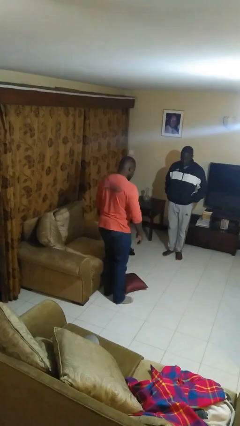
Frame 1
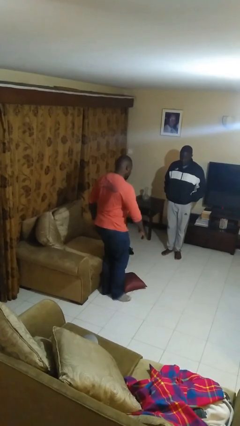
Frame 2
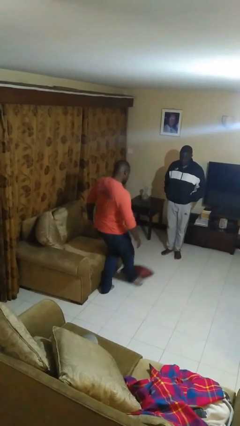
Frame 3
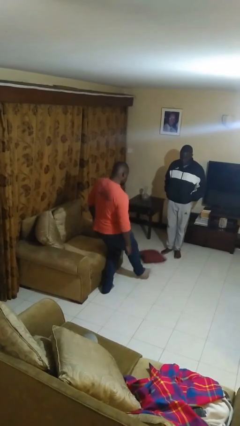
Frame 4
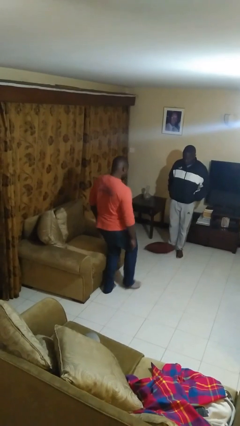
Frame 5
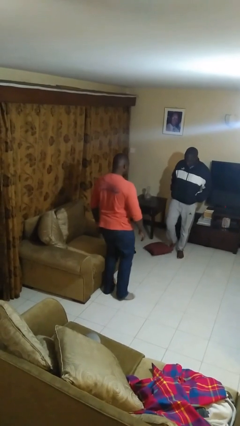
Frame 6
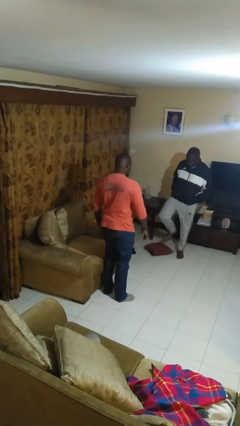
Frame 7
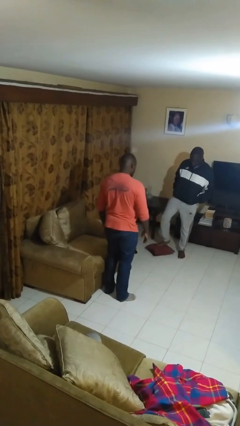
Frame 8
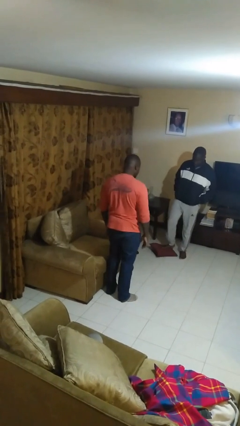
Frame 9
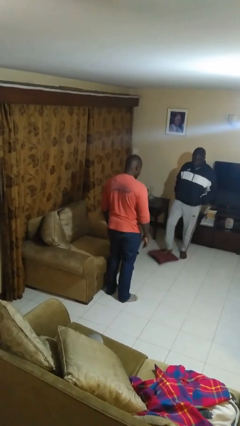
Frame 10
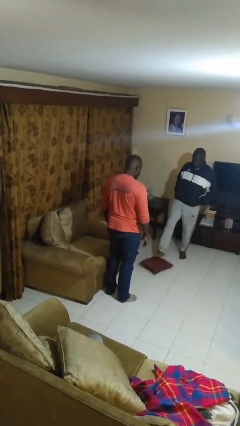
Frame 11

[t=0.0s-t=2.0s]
person kicks object to person

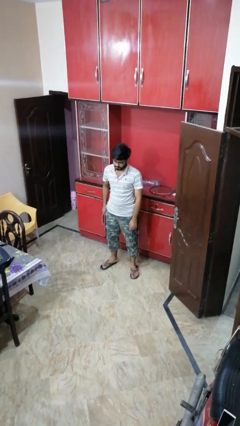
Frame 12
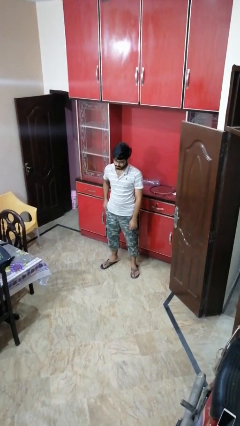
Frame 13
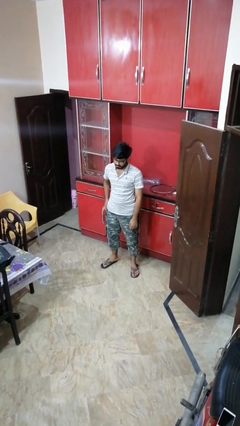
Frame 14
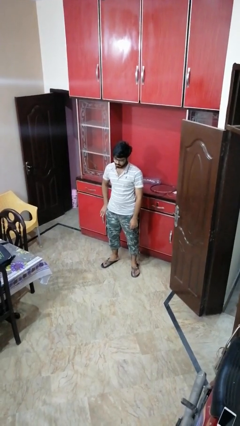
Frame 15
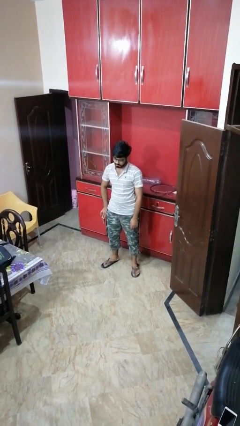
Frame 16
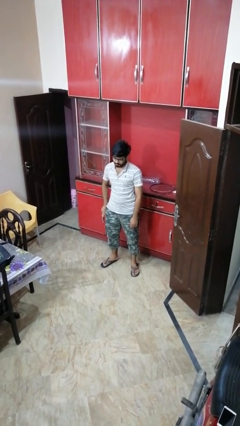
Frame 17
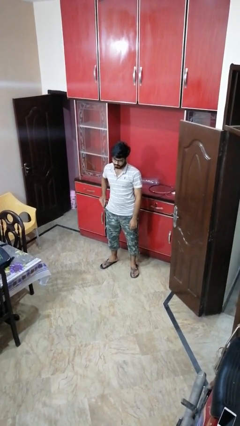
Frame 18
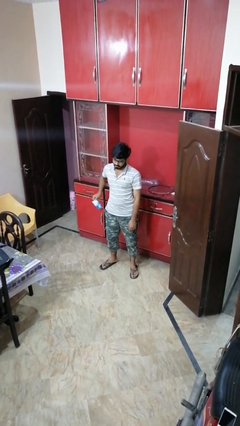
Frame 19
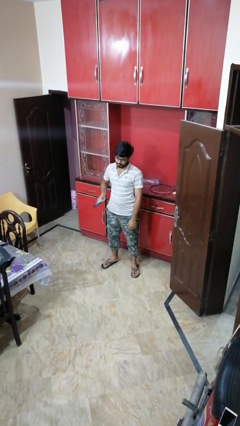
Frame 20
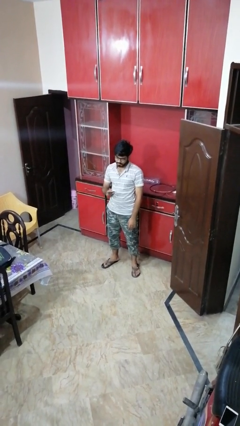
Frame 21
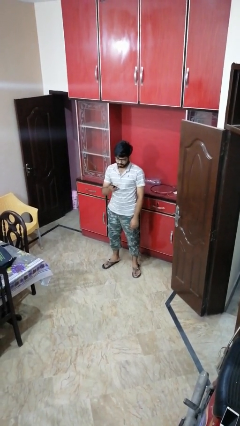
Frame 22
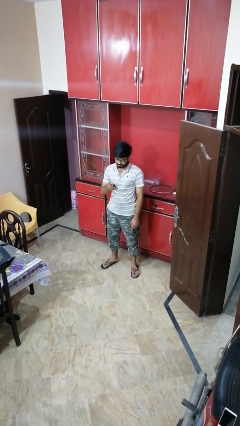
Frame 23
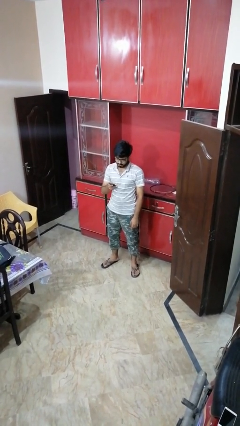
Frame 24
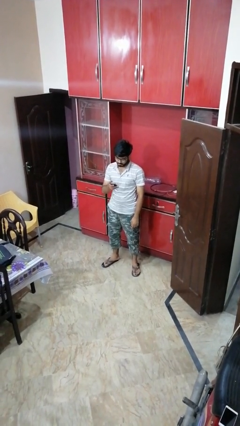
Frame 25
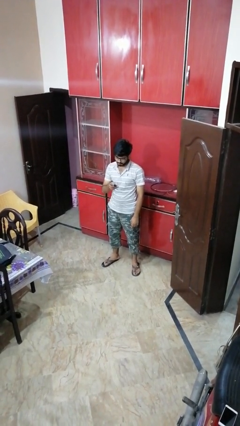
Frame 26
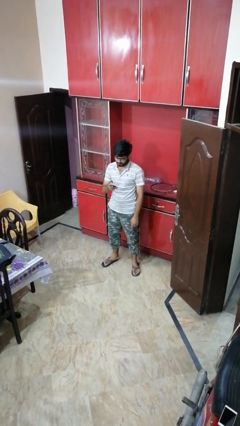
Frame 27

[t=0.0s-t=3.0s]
person takes phone from pocket

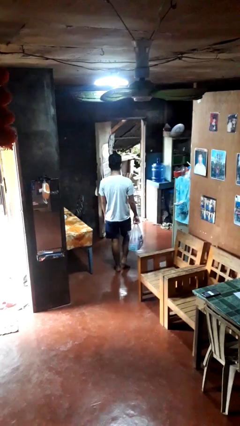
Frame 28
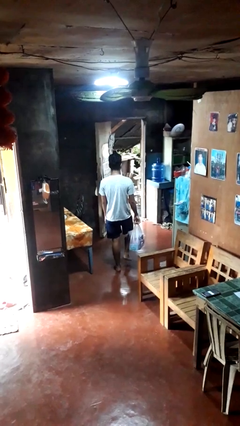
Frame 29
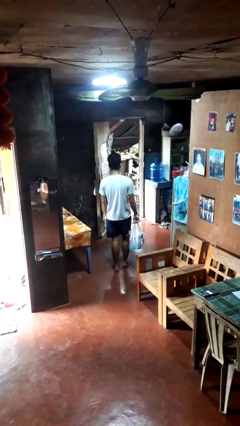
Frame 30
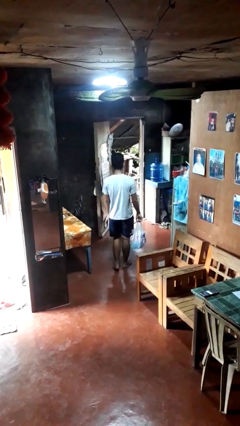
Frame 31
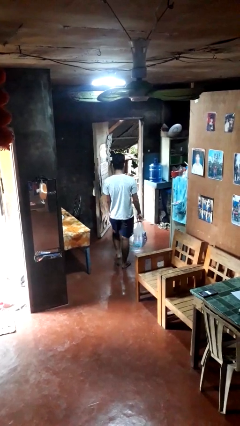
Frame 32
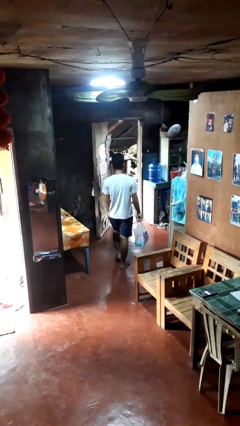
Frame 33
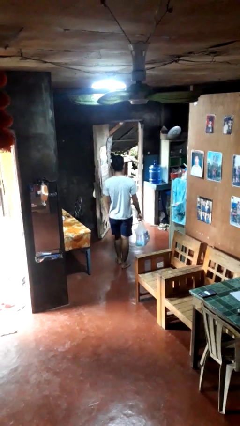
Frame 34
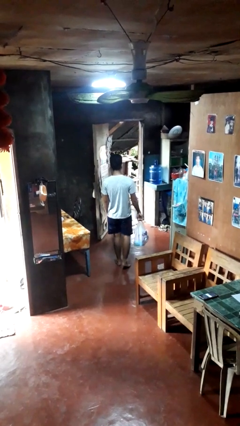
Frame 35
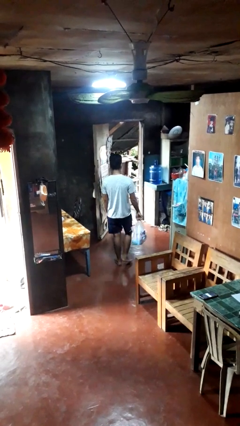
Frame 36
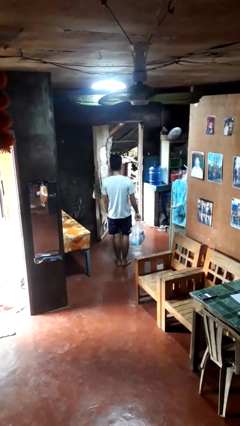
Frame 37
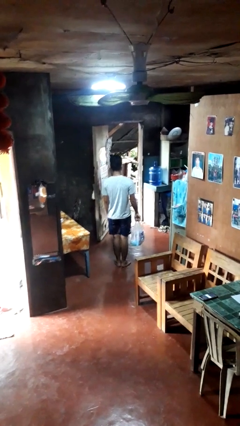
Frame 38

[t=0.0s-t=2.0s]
person carries groceries

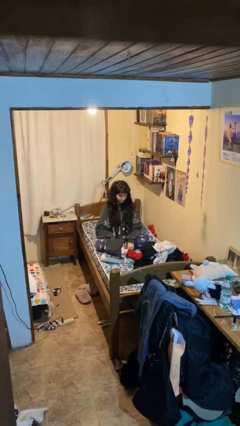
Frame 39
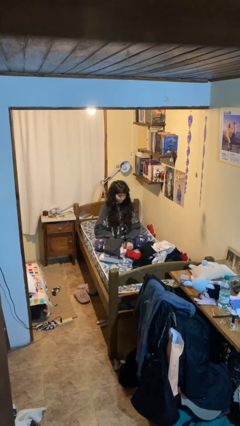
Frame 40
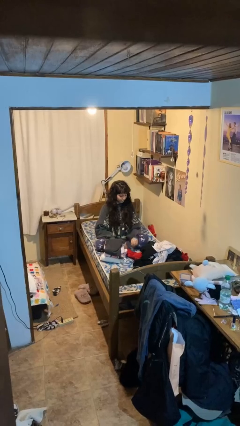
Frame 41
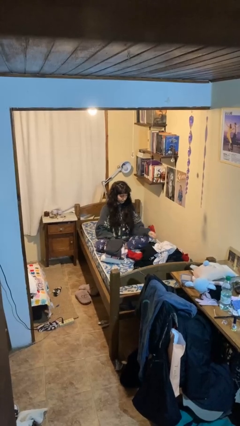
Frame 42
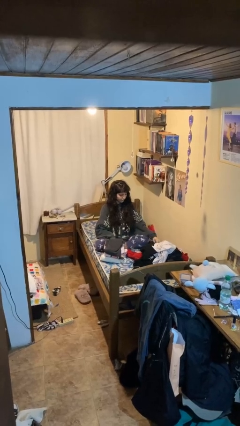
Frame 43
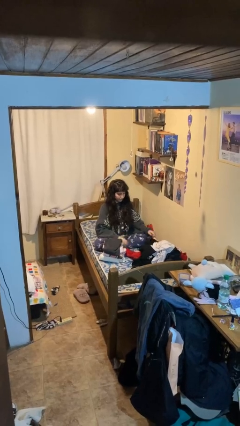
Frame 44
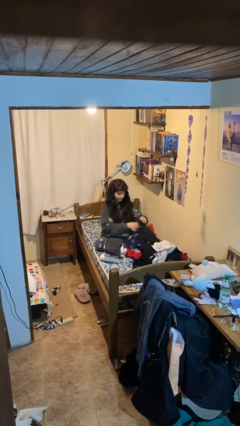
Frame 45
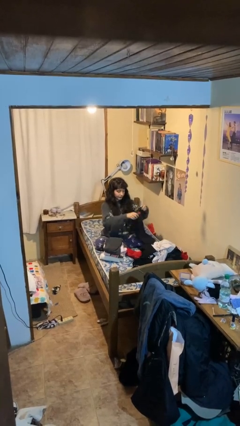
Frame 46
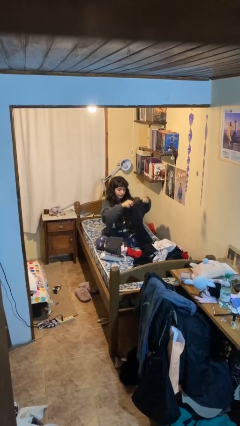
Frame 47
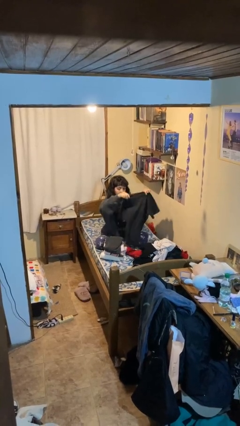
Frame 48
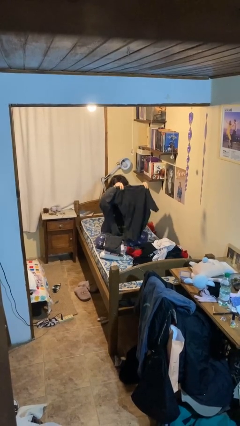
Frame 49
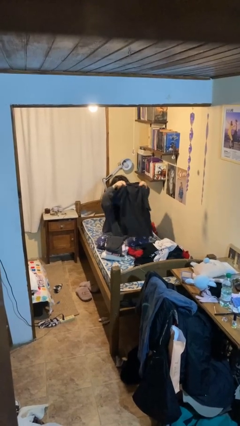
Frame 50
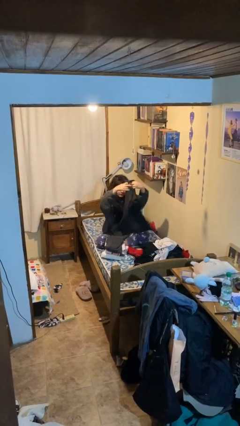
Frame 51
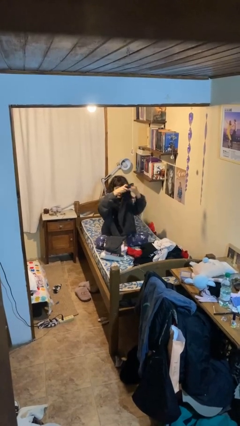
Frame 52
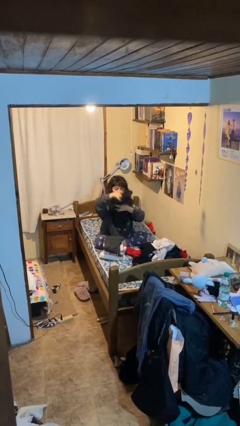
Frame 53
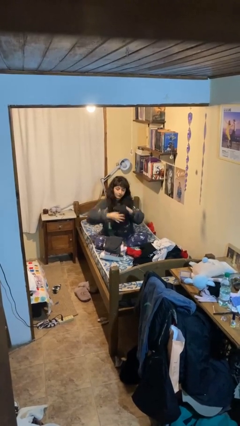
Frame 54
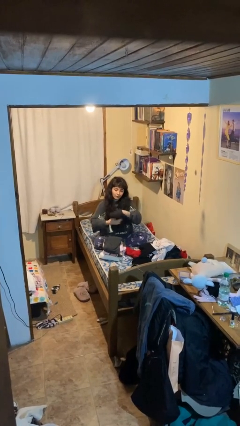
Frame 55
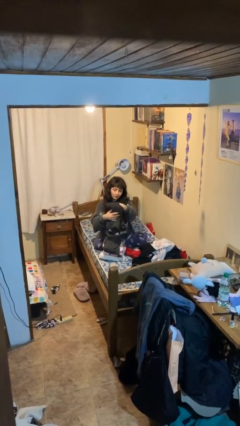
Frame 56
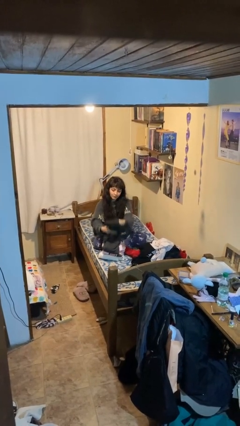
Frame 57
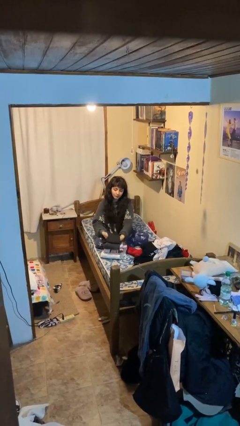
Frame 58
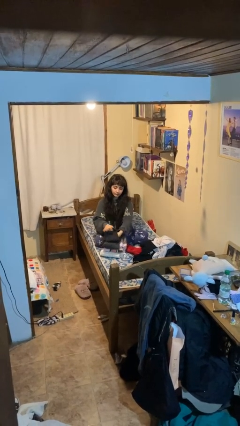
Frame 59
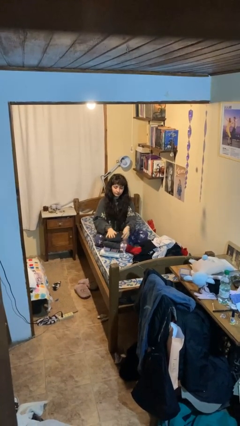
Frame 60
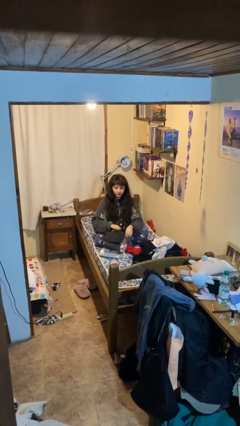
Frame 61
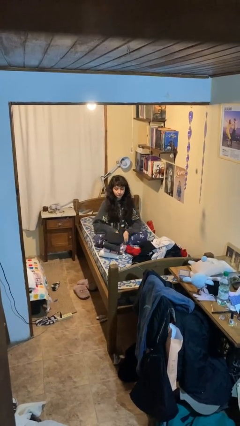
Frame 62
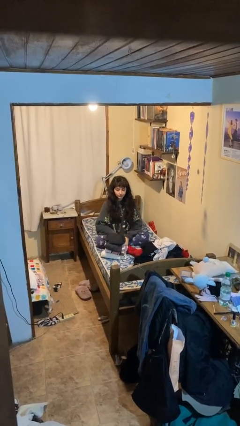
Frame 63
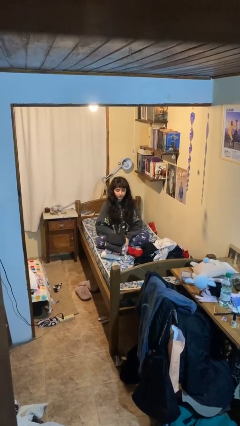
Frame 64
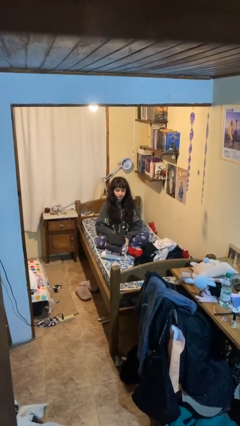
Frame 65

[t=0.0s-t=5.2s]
person folds shirt

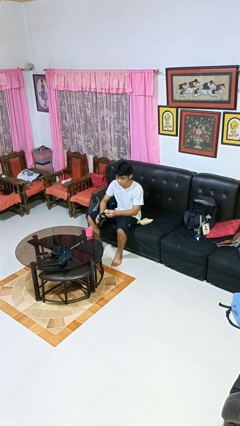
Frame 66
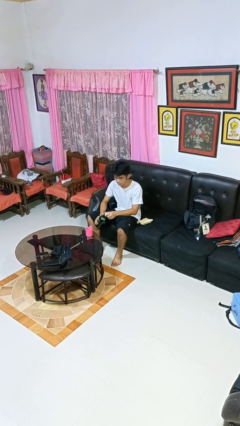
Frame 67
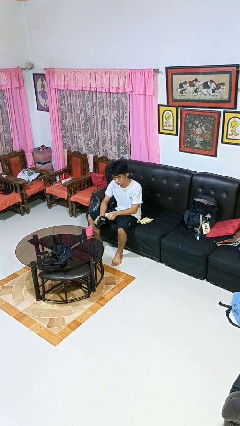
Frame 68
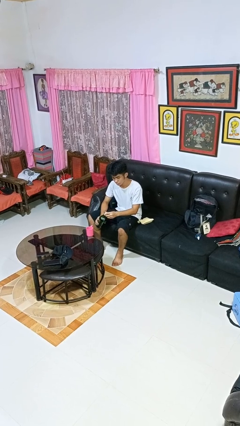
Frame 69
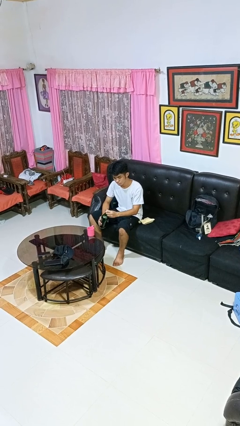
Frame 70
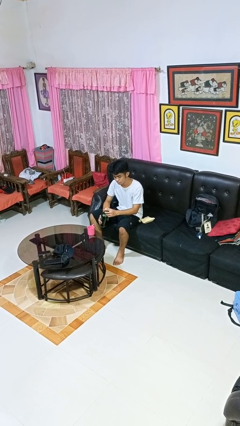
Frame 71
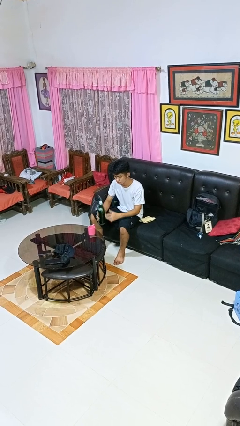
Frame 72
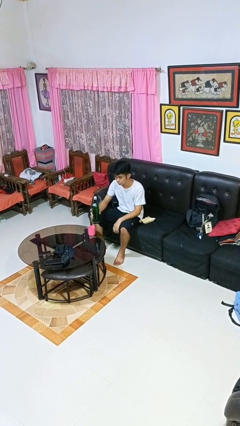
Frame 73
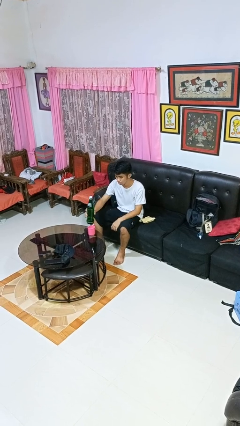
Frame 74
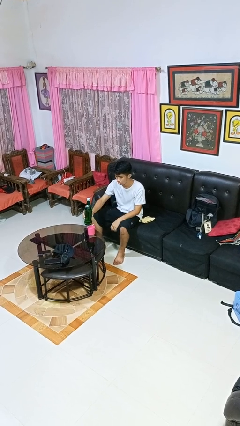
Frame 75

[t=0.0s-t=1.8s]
person screws lid to bottle

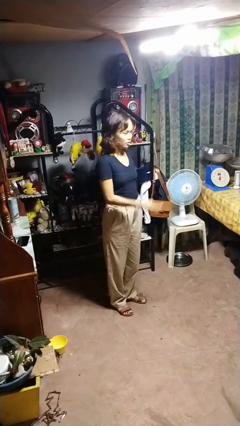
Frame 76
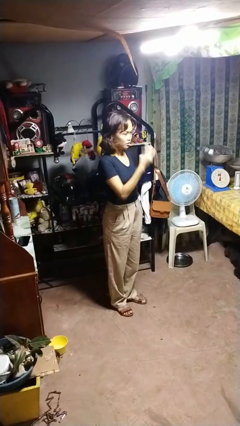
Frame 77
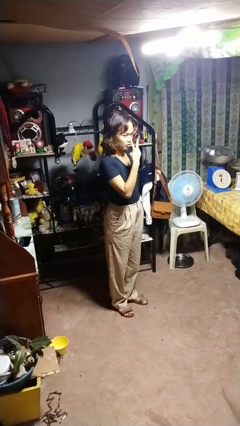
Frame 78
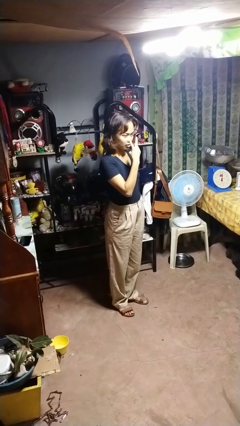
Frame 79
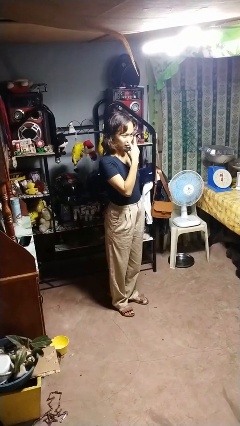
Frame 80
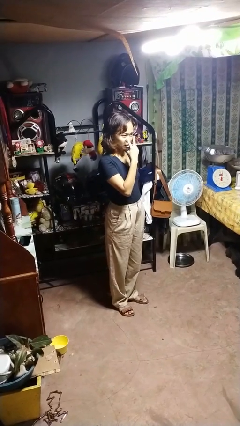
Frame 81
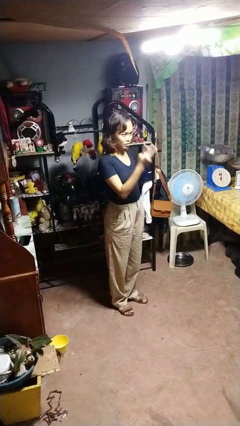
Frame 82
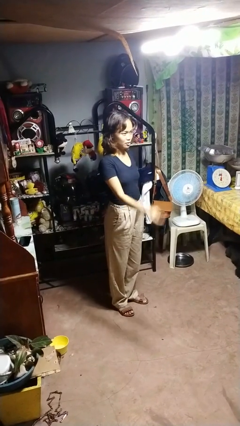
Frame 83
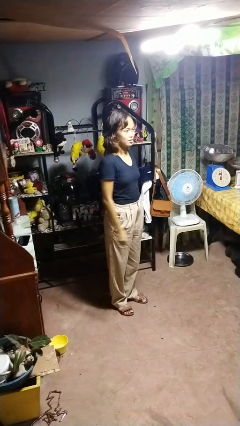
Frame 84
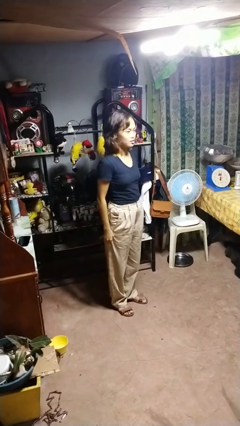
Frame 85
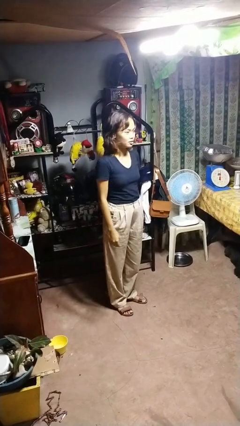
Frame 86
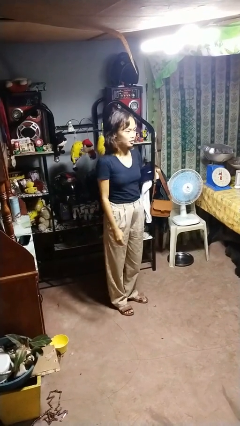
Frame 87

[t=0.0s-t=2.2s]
person gestures watch closely

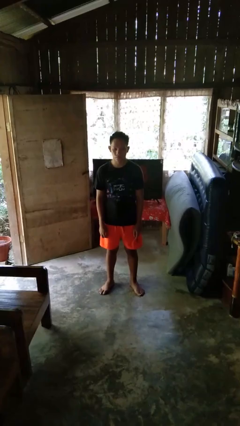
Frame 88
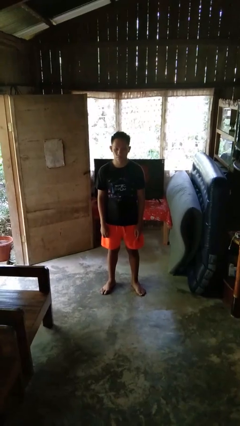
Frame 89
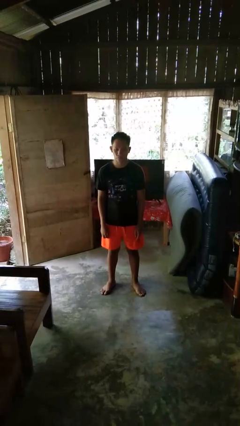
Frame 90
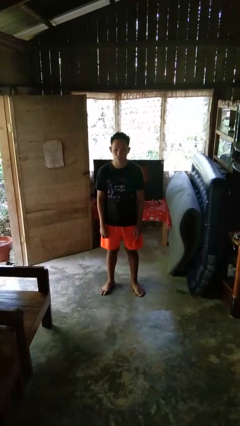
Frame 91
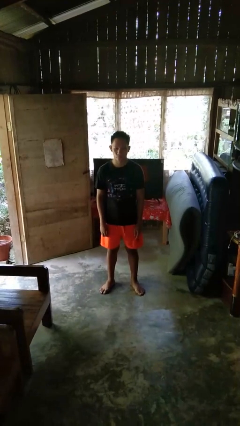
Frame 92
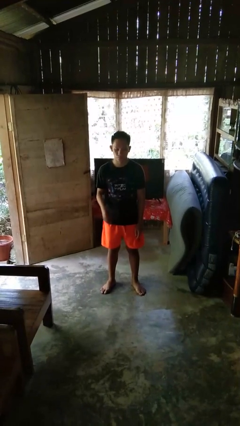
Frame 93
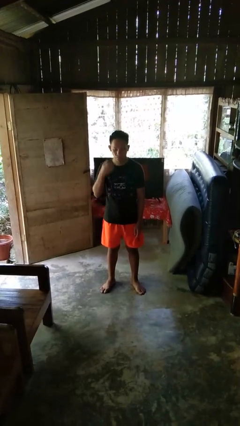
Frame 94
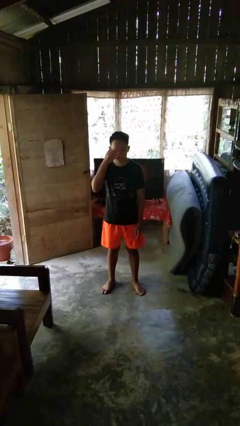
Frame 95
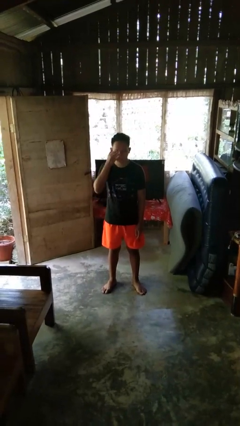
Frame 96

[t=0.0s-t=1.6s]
person rubs eyes
